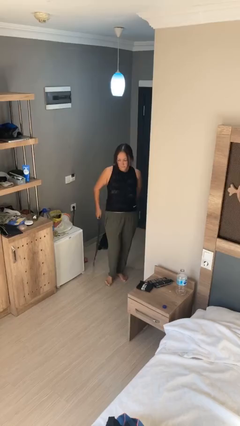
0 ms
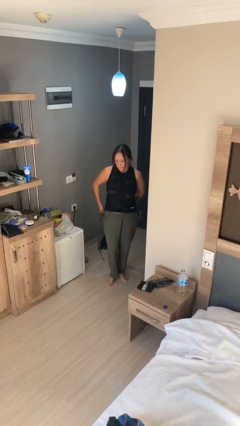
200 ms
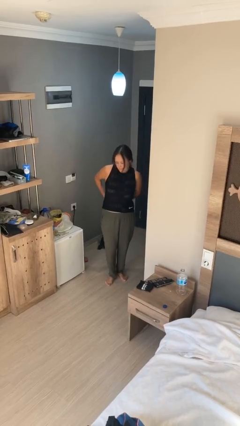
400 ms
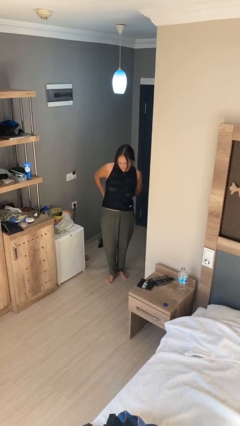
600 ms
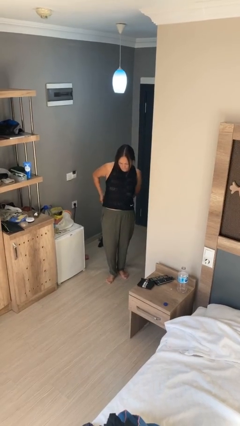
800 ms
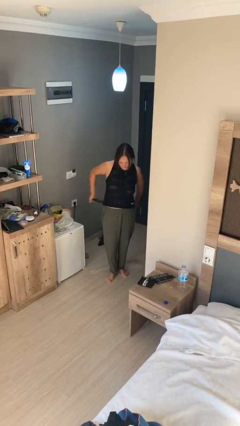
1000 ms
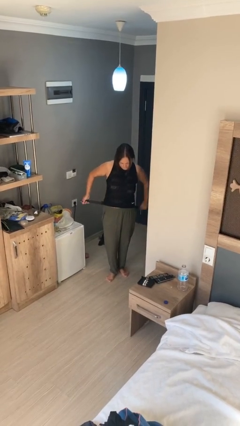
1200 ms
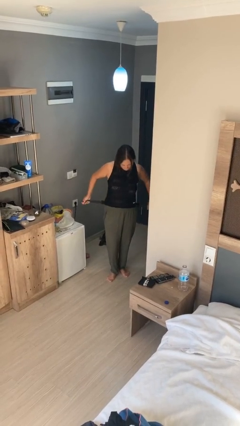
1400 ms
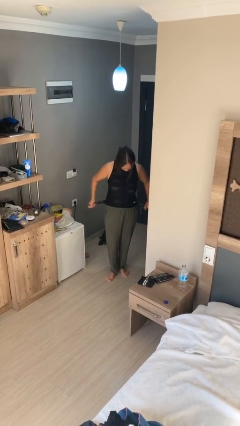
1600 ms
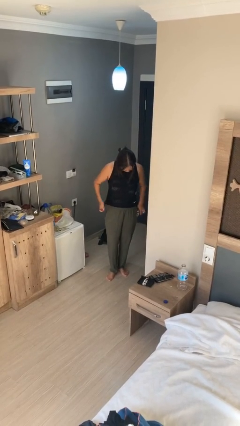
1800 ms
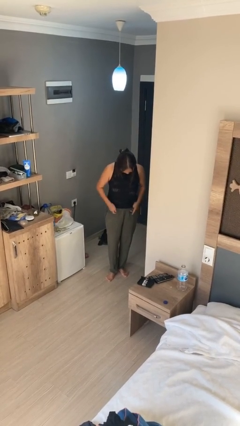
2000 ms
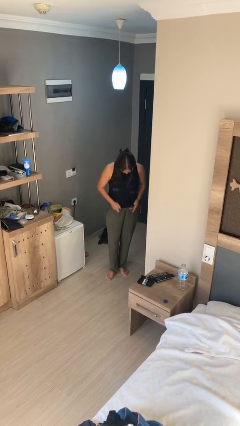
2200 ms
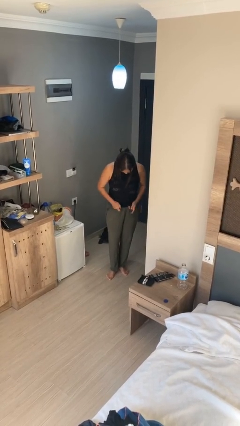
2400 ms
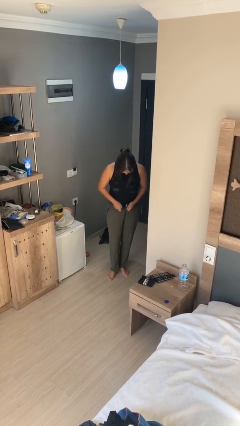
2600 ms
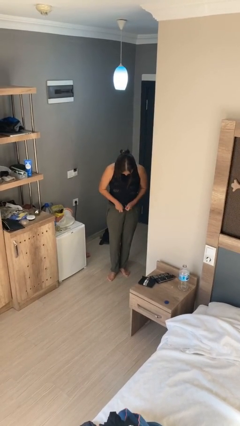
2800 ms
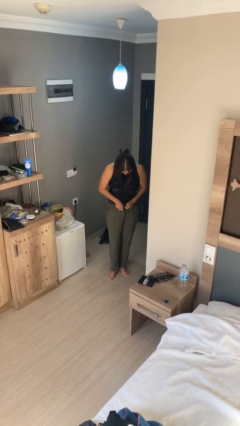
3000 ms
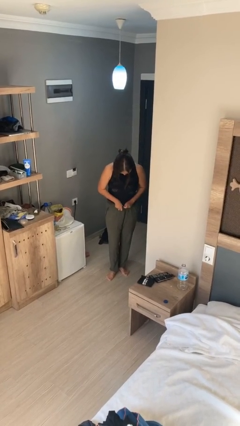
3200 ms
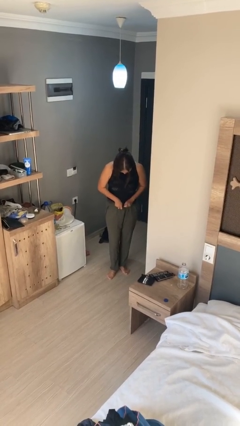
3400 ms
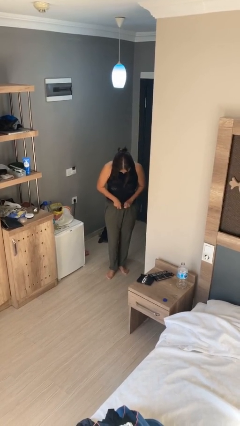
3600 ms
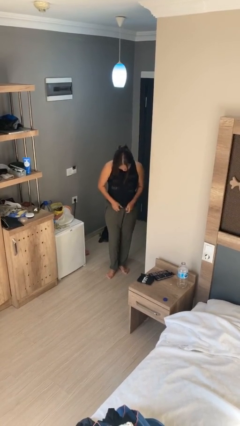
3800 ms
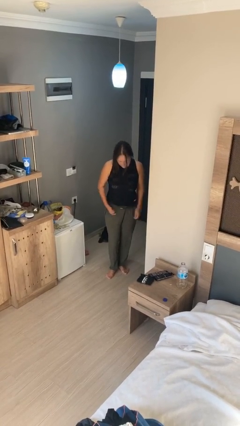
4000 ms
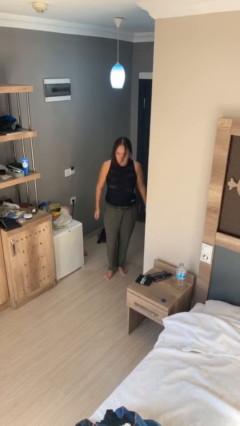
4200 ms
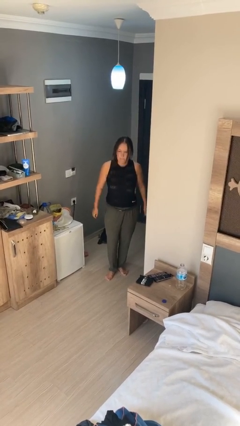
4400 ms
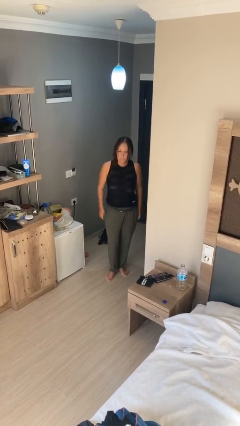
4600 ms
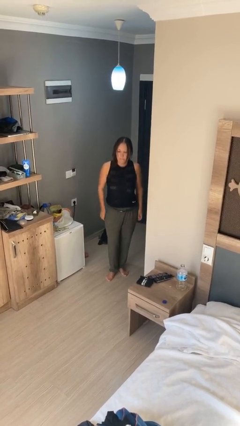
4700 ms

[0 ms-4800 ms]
person puts on belt

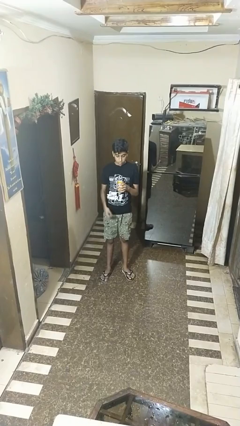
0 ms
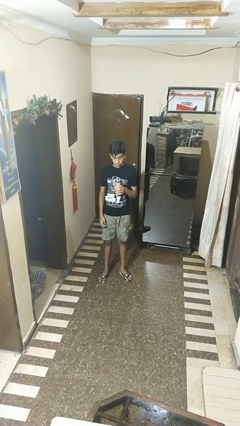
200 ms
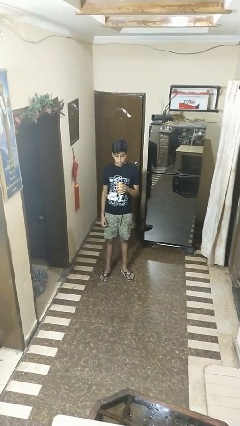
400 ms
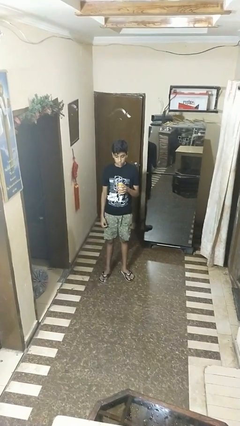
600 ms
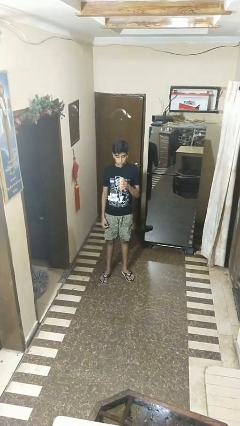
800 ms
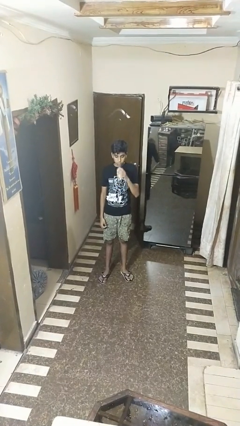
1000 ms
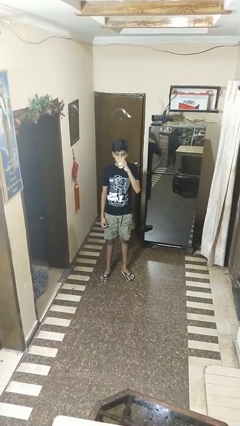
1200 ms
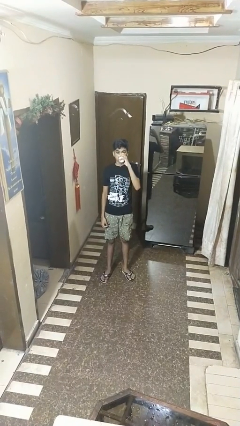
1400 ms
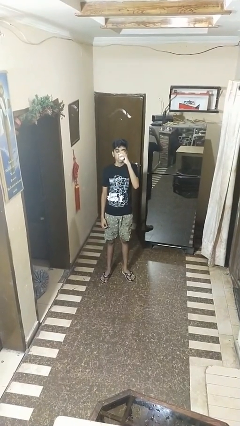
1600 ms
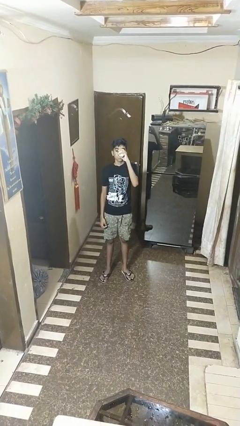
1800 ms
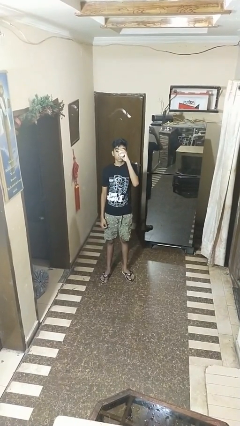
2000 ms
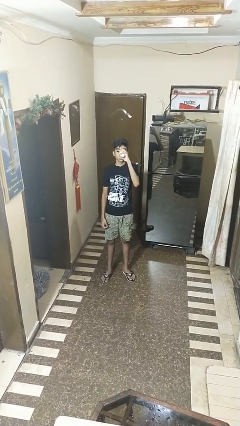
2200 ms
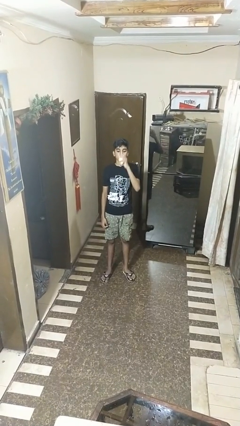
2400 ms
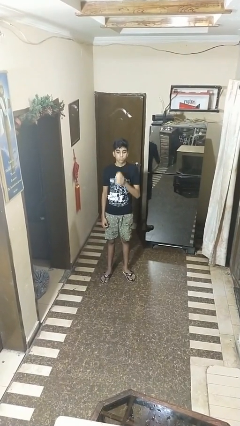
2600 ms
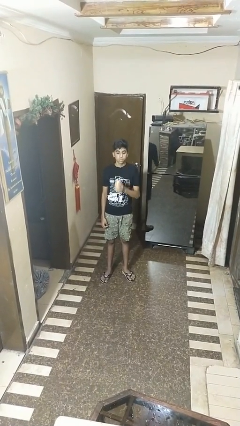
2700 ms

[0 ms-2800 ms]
person drinks from beverage can

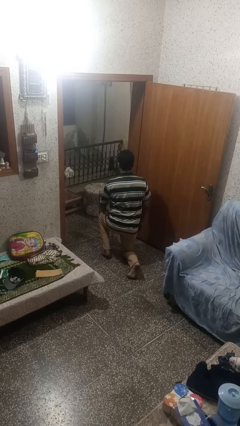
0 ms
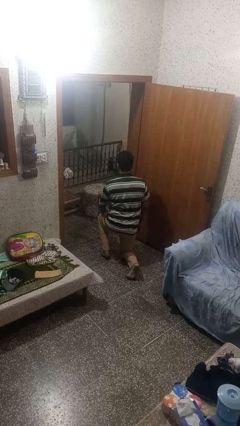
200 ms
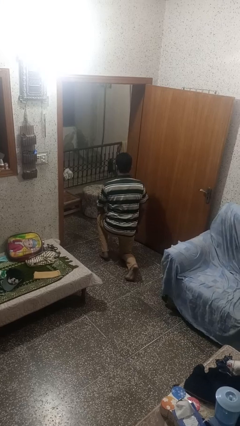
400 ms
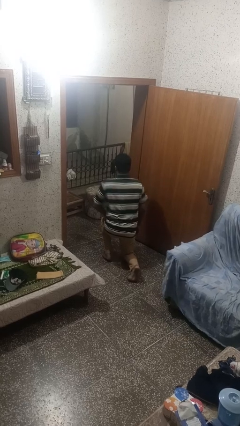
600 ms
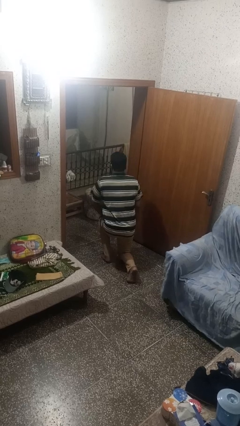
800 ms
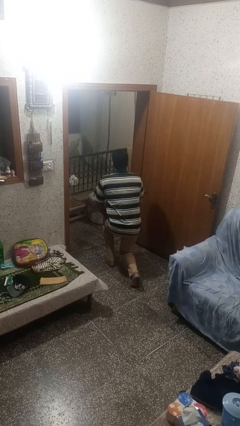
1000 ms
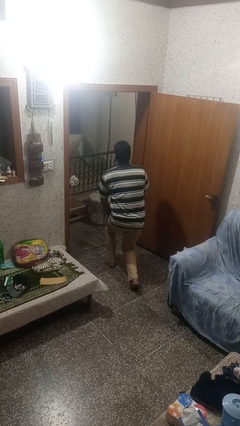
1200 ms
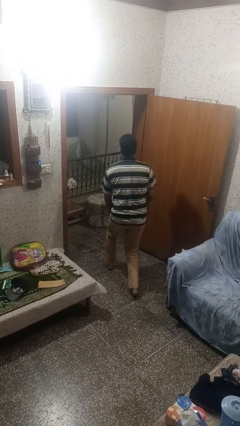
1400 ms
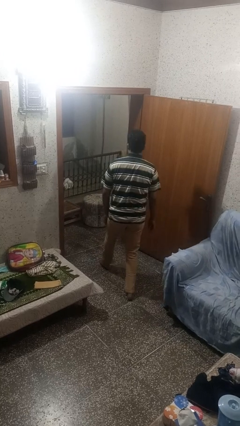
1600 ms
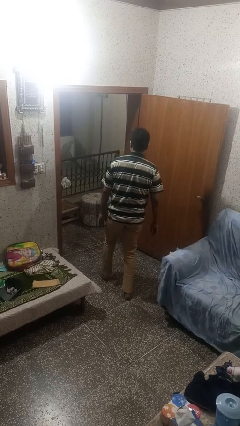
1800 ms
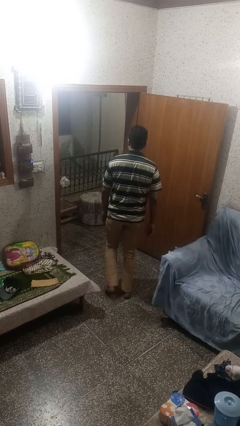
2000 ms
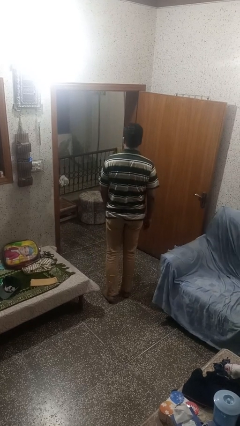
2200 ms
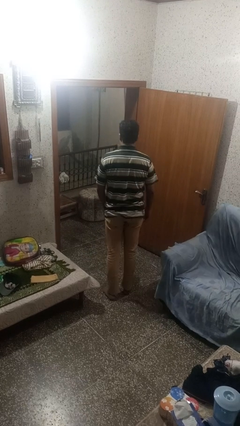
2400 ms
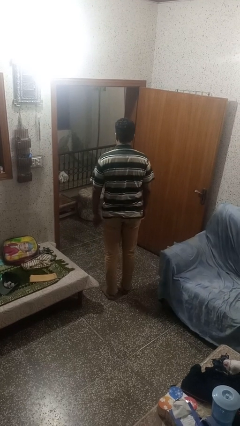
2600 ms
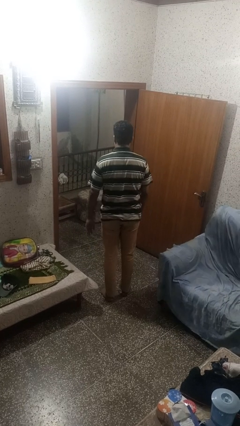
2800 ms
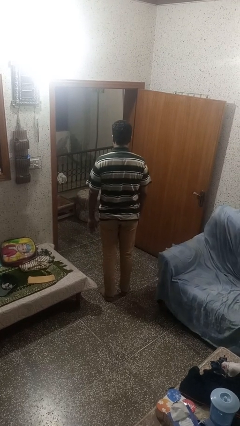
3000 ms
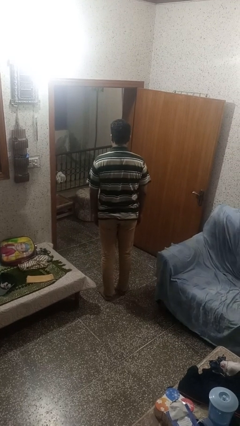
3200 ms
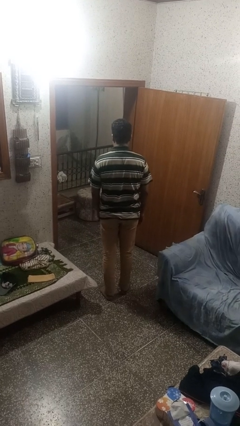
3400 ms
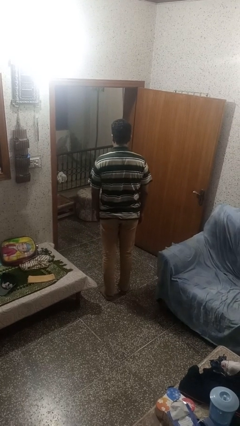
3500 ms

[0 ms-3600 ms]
person stands up from floor

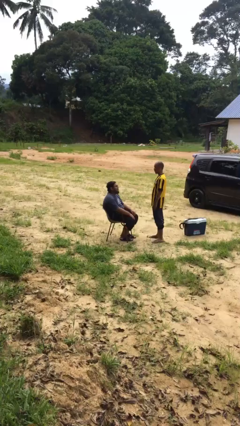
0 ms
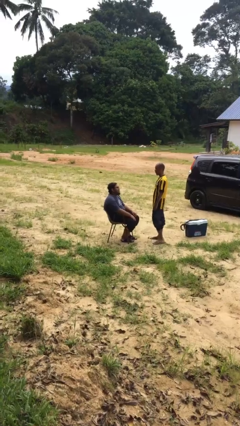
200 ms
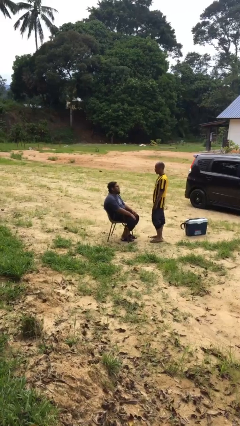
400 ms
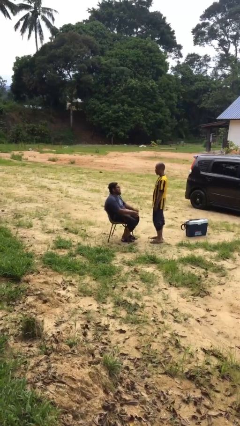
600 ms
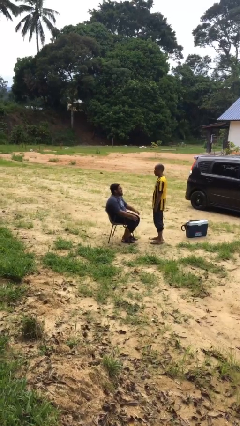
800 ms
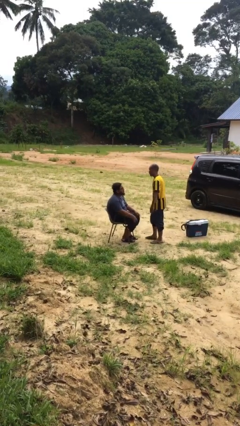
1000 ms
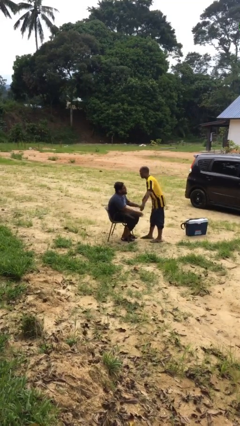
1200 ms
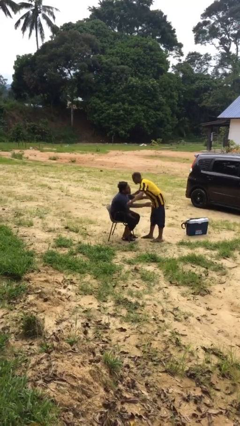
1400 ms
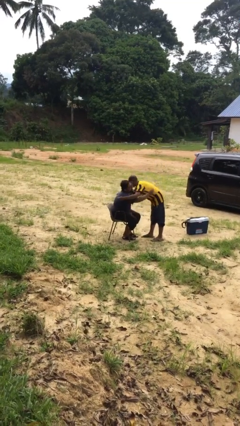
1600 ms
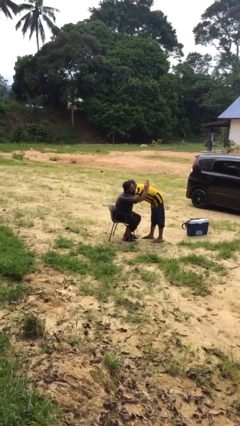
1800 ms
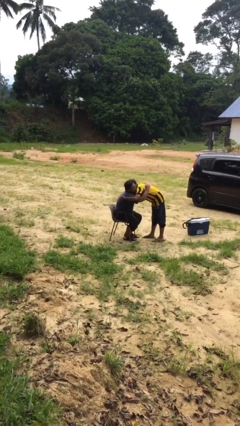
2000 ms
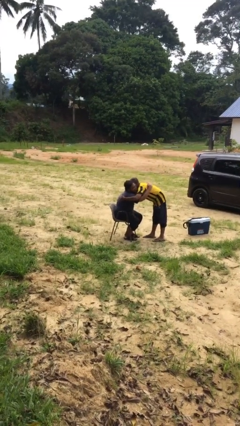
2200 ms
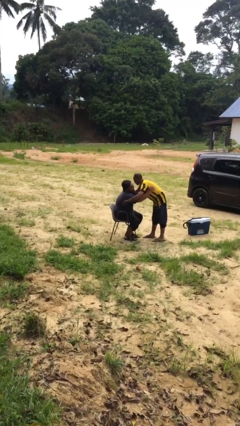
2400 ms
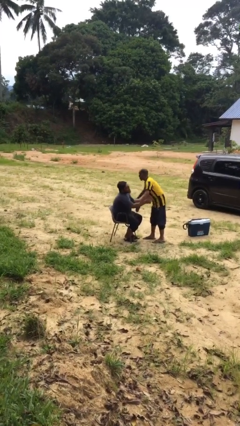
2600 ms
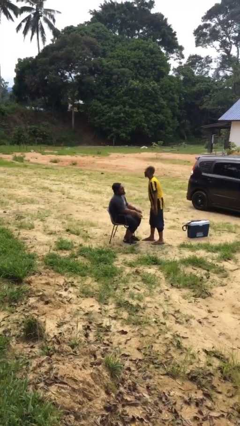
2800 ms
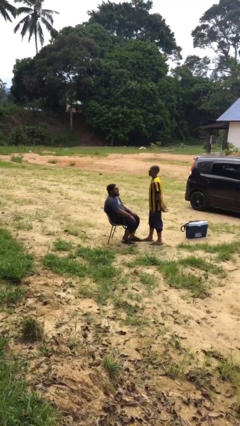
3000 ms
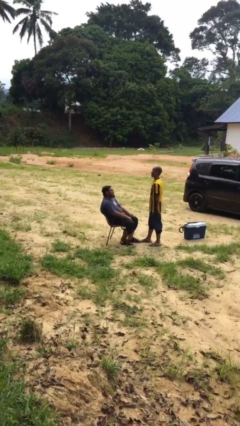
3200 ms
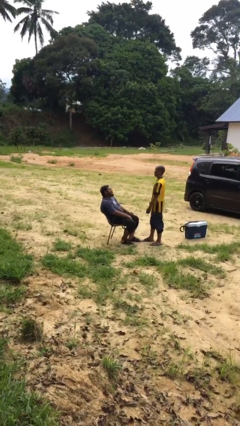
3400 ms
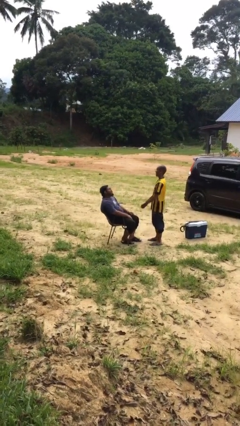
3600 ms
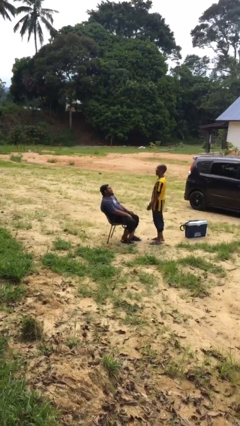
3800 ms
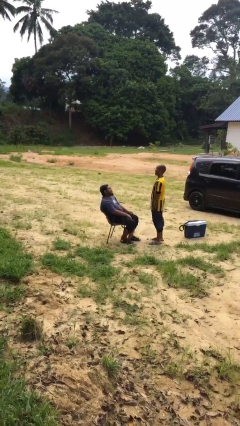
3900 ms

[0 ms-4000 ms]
person embraces person

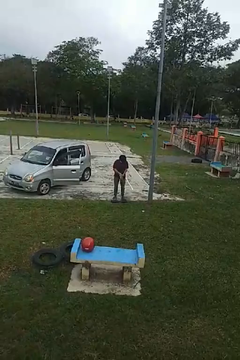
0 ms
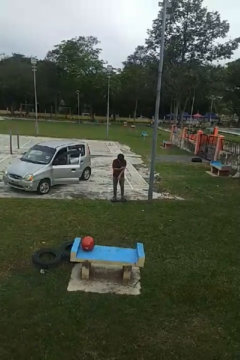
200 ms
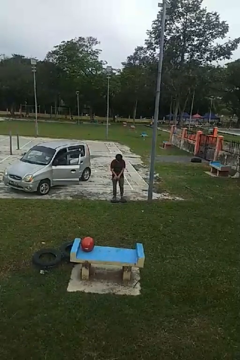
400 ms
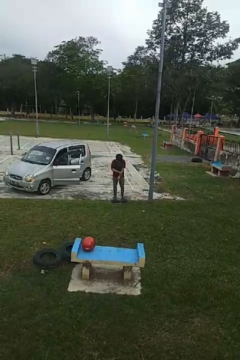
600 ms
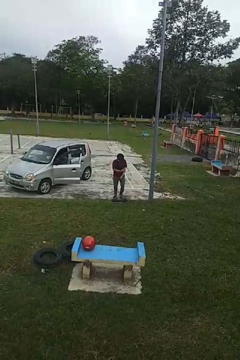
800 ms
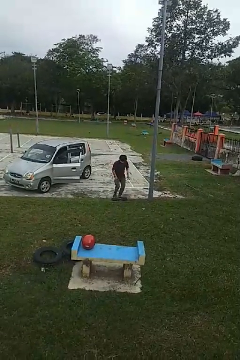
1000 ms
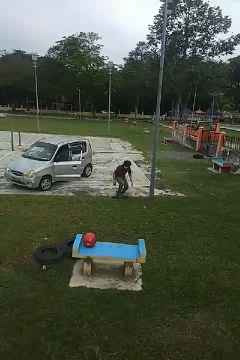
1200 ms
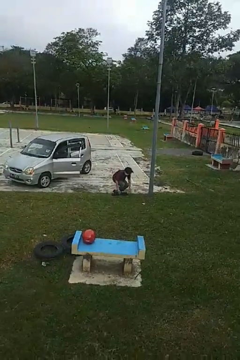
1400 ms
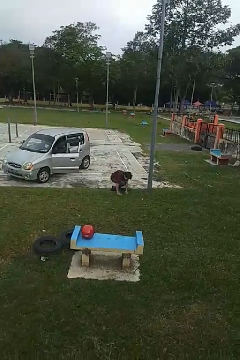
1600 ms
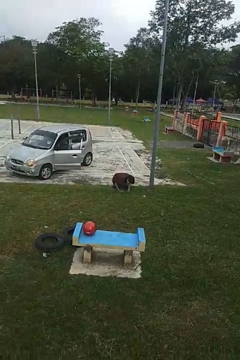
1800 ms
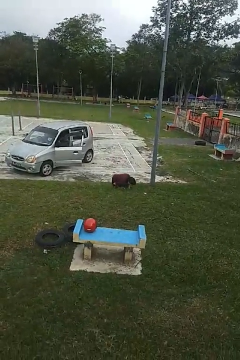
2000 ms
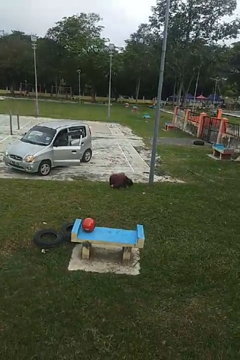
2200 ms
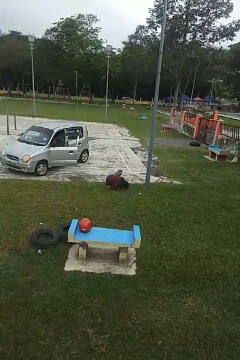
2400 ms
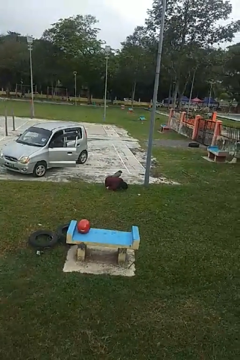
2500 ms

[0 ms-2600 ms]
person trips on object on floor
